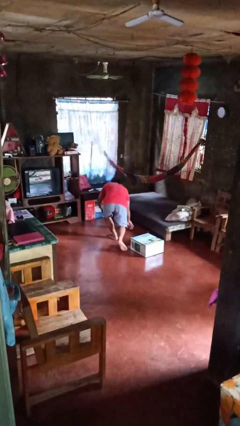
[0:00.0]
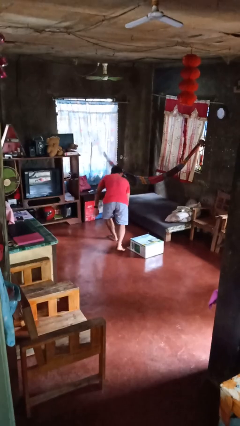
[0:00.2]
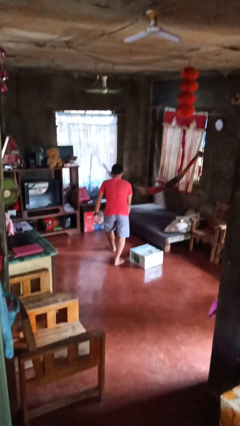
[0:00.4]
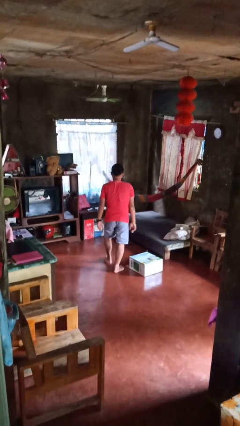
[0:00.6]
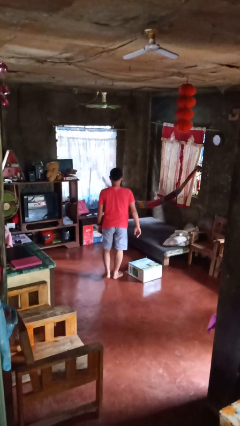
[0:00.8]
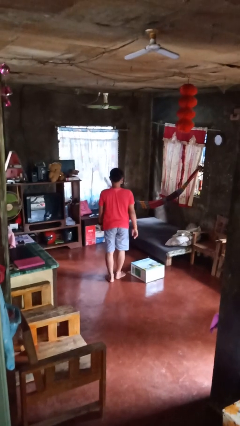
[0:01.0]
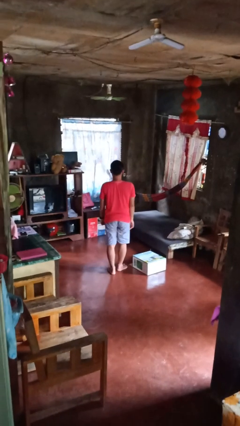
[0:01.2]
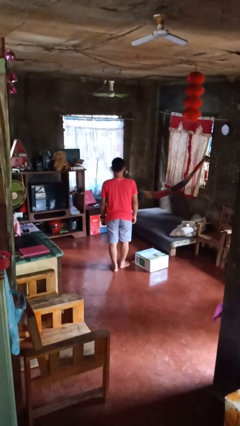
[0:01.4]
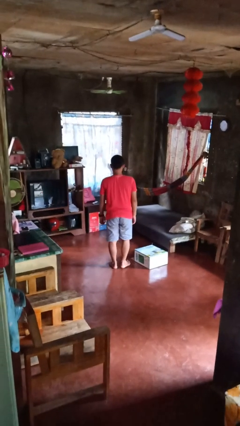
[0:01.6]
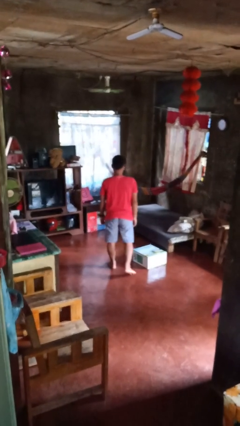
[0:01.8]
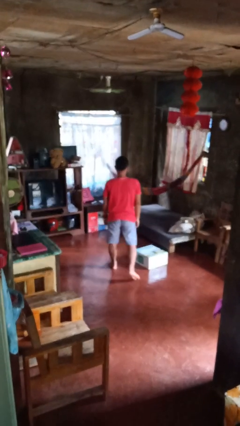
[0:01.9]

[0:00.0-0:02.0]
person stands up from floor

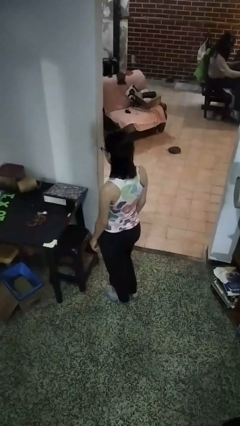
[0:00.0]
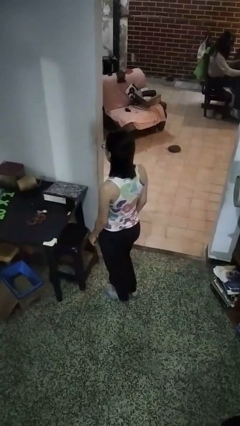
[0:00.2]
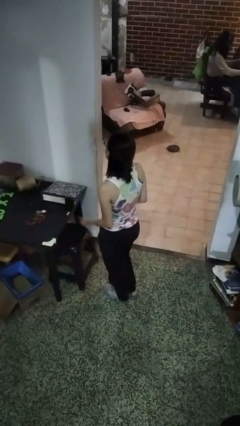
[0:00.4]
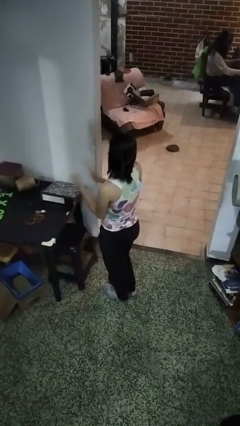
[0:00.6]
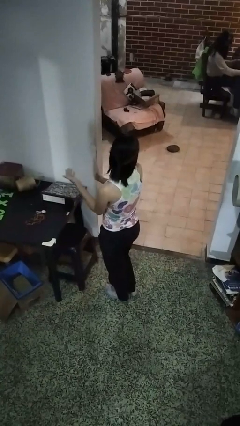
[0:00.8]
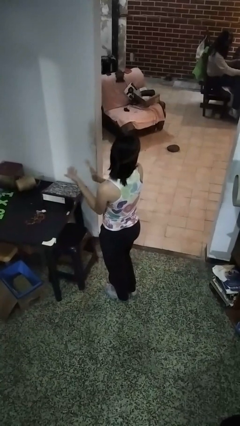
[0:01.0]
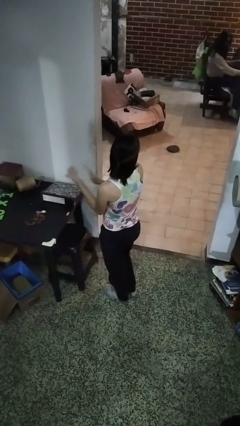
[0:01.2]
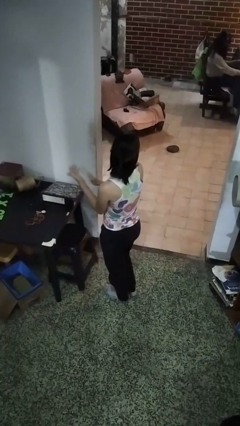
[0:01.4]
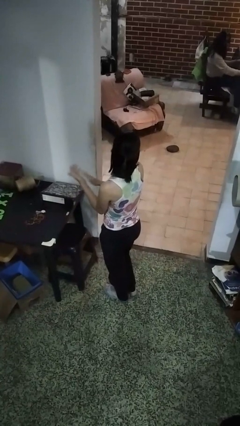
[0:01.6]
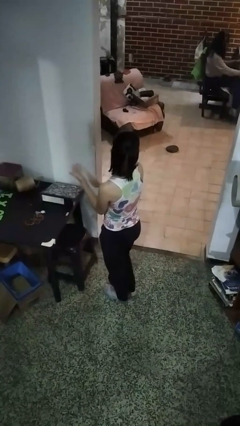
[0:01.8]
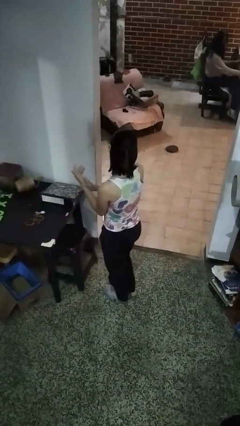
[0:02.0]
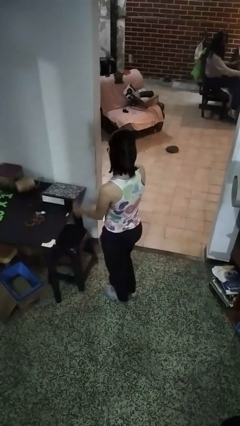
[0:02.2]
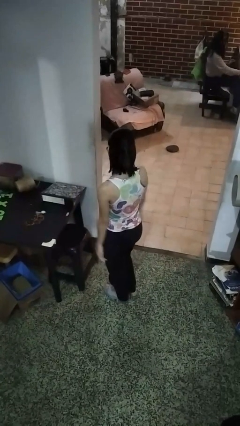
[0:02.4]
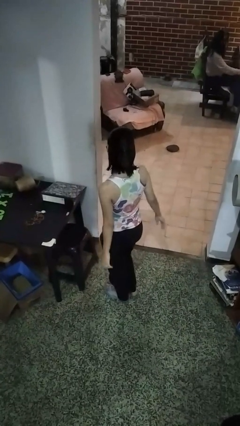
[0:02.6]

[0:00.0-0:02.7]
person claps hands

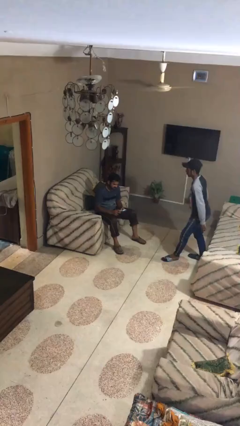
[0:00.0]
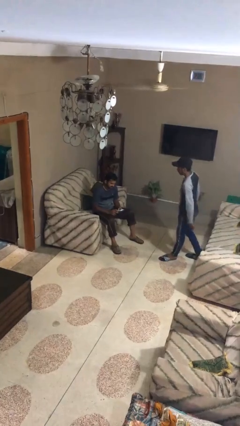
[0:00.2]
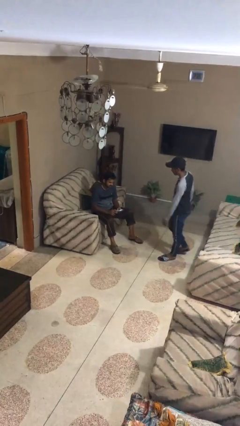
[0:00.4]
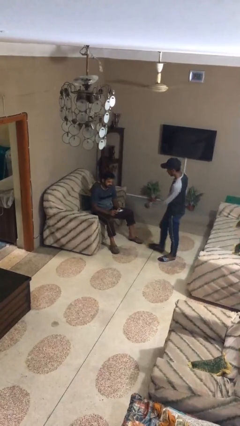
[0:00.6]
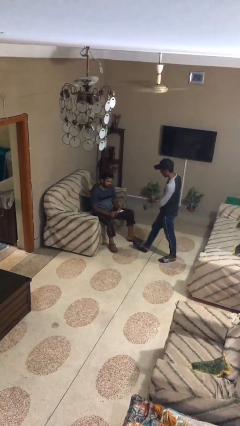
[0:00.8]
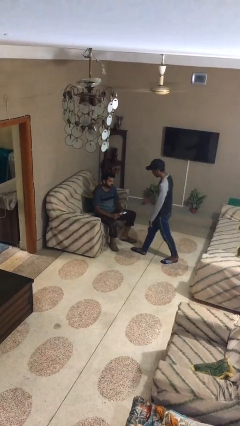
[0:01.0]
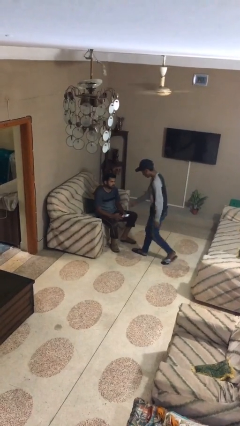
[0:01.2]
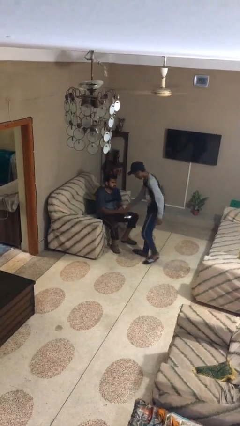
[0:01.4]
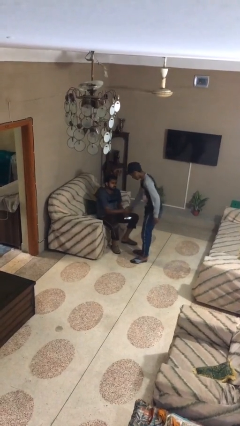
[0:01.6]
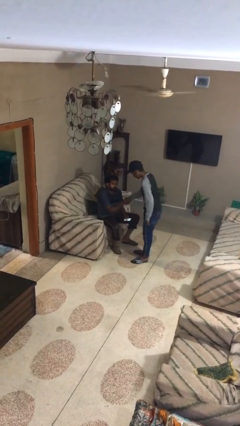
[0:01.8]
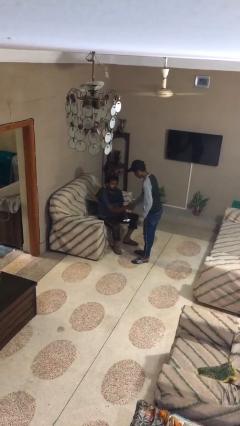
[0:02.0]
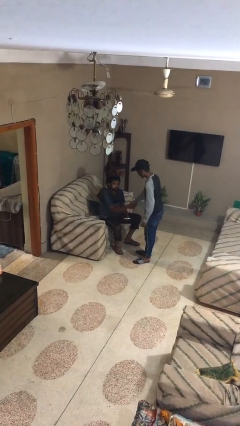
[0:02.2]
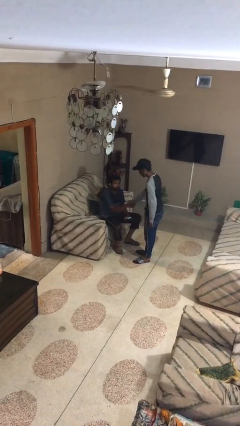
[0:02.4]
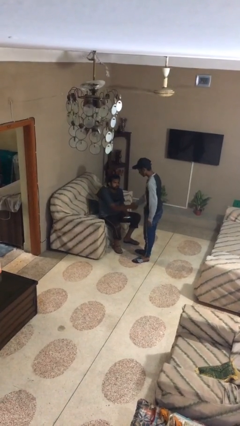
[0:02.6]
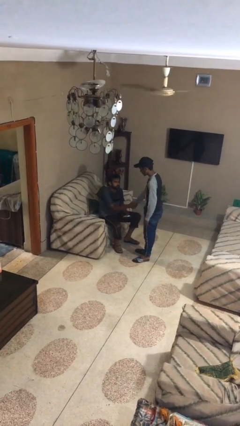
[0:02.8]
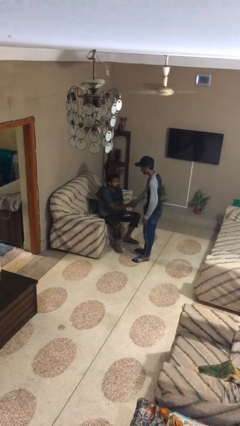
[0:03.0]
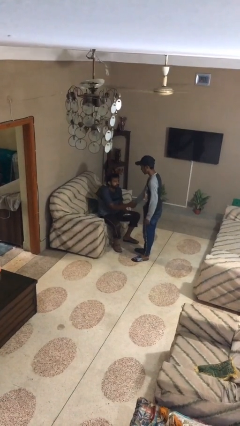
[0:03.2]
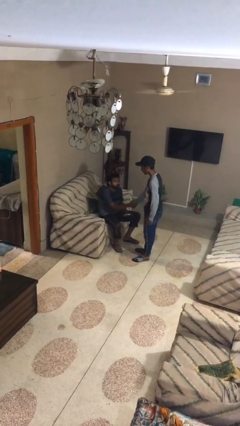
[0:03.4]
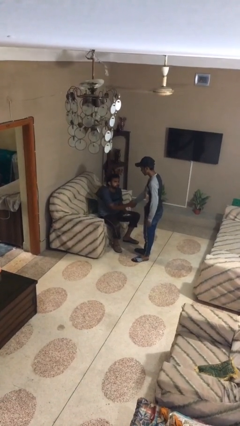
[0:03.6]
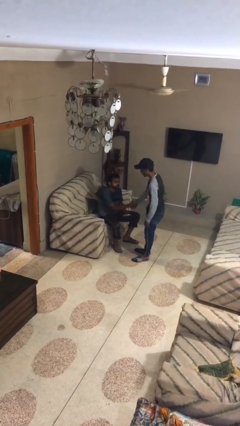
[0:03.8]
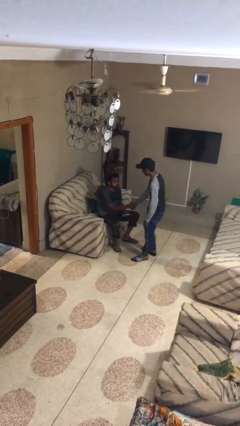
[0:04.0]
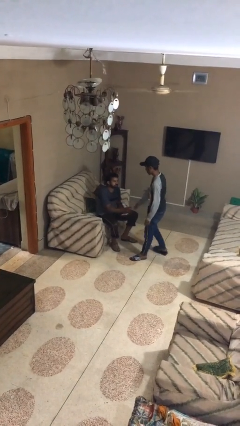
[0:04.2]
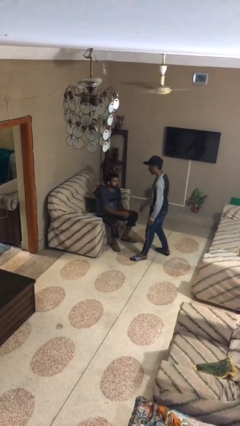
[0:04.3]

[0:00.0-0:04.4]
person shakes hand

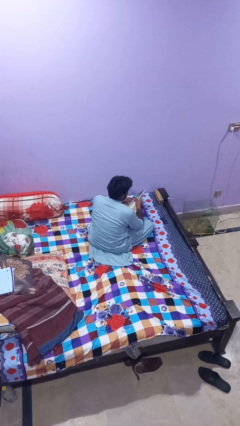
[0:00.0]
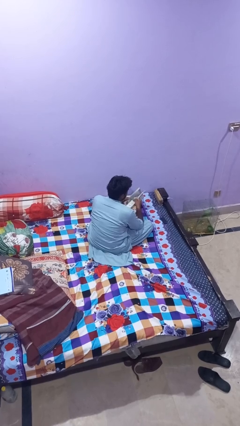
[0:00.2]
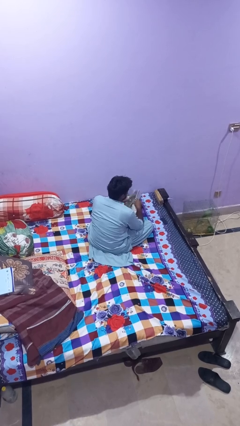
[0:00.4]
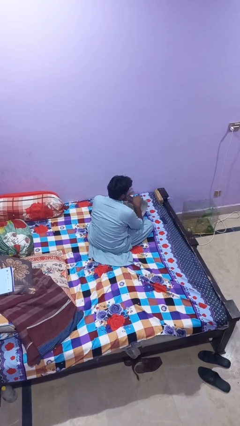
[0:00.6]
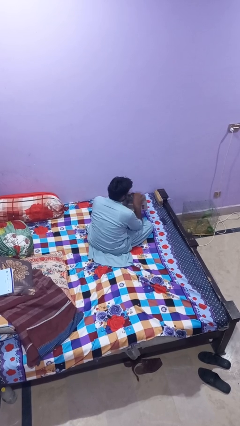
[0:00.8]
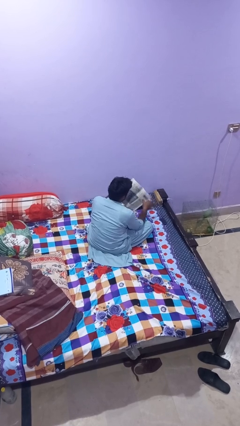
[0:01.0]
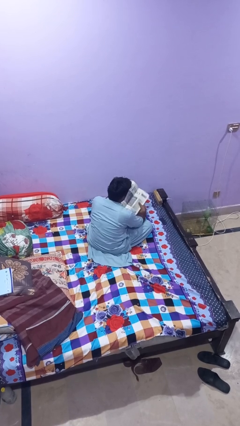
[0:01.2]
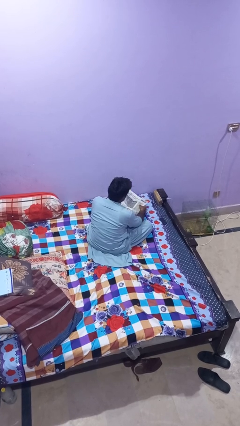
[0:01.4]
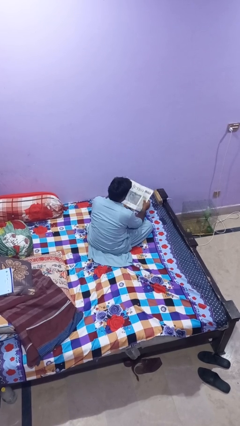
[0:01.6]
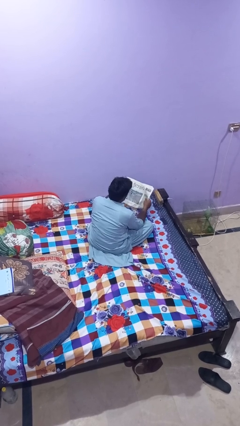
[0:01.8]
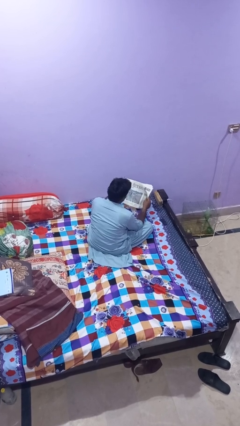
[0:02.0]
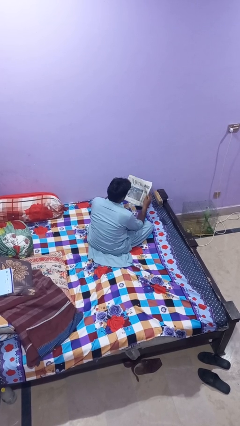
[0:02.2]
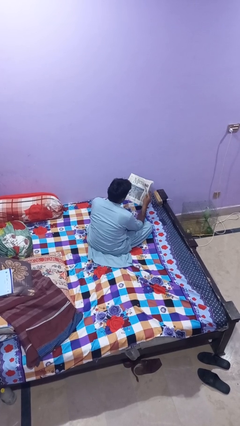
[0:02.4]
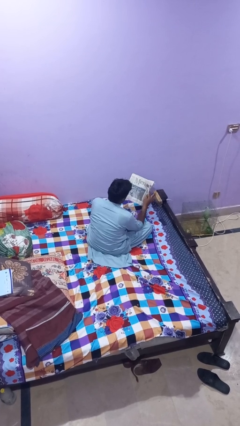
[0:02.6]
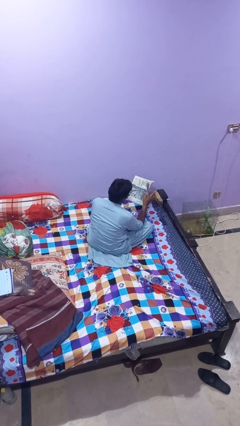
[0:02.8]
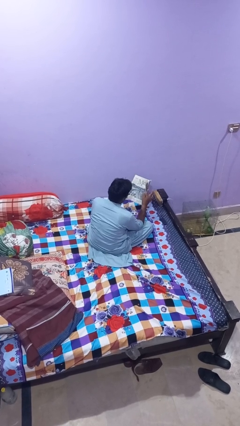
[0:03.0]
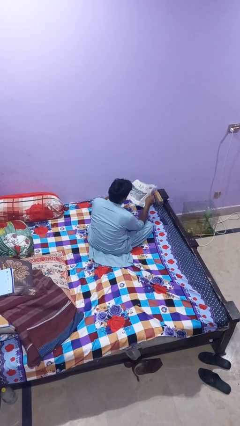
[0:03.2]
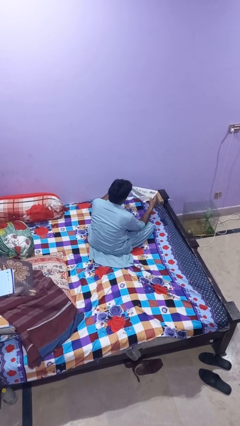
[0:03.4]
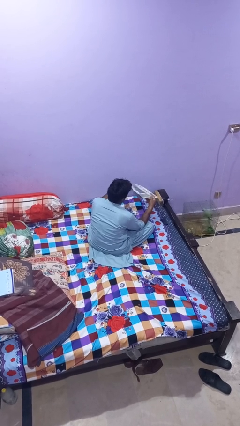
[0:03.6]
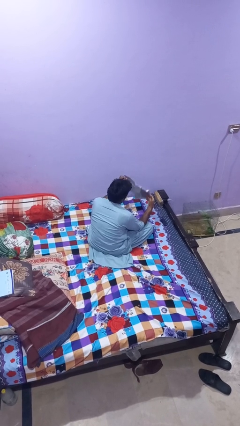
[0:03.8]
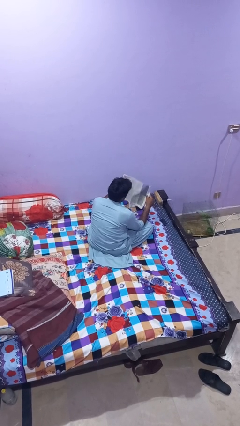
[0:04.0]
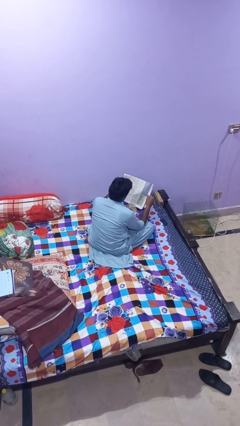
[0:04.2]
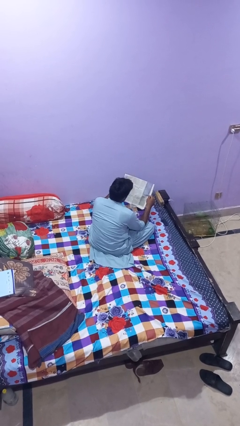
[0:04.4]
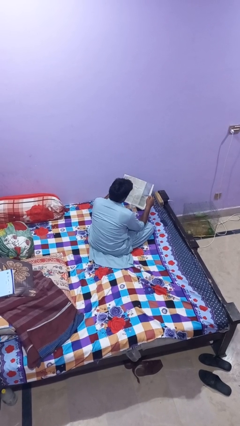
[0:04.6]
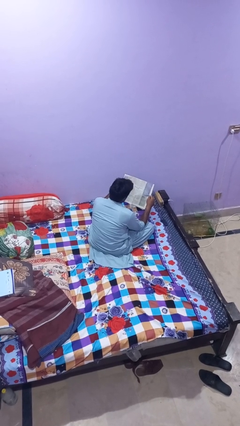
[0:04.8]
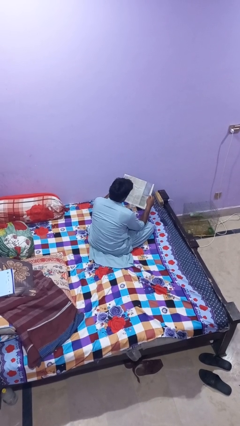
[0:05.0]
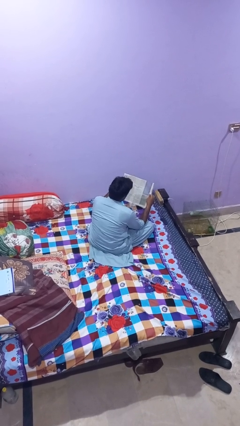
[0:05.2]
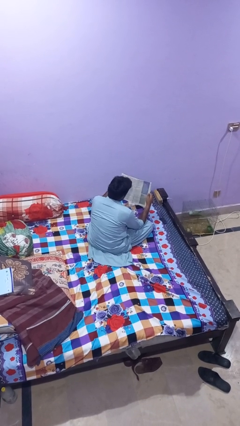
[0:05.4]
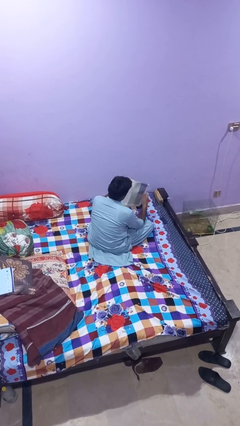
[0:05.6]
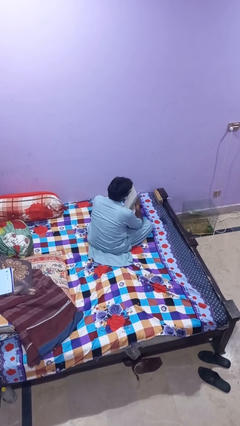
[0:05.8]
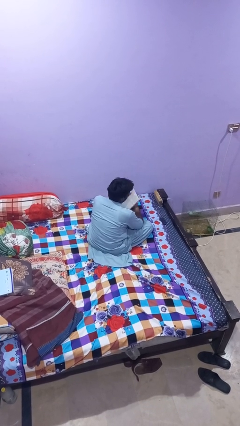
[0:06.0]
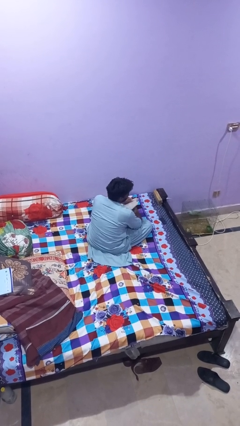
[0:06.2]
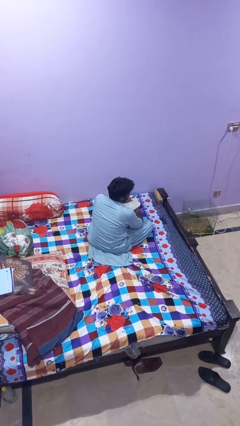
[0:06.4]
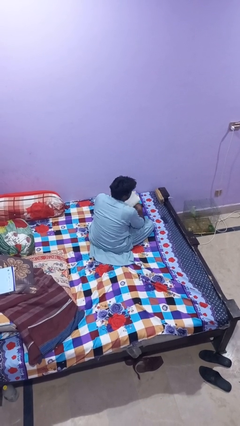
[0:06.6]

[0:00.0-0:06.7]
person reads newspaper

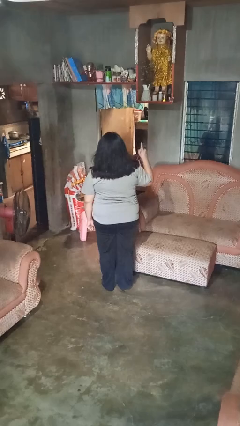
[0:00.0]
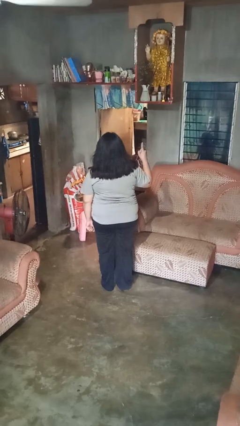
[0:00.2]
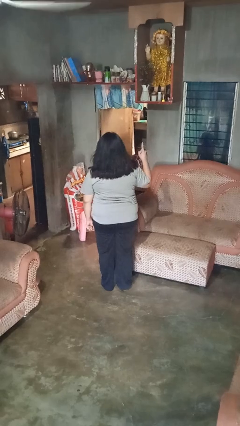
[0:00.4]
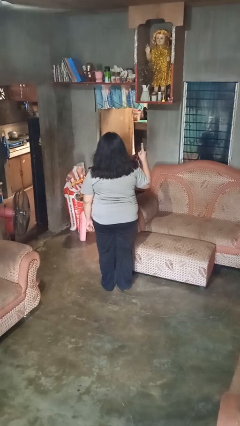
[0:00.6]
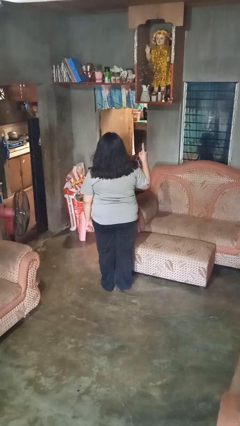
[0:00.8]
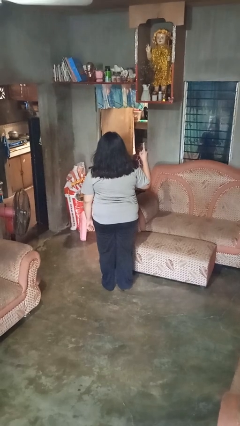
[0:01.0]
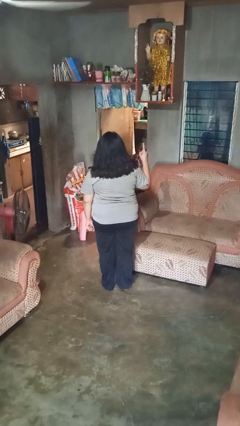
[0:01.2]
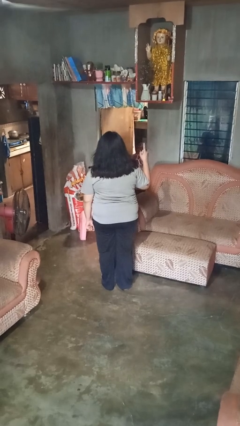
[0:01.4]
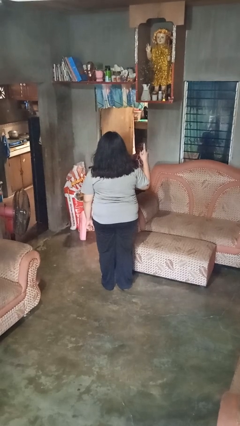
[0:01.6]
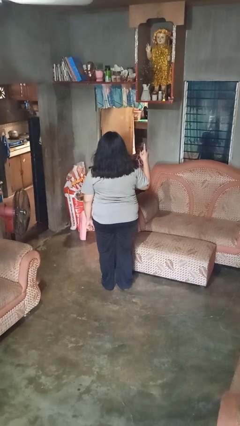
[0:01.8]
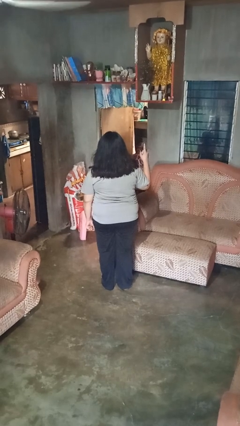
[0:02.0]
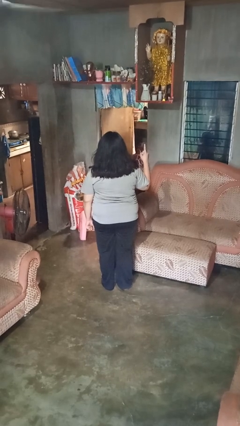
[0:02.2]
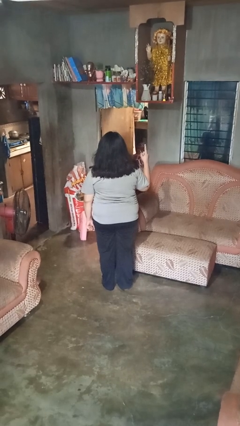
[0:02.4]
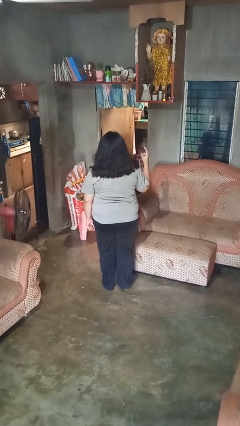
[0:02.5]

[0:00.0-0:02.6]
person gestures number one
